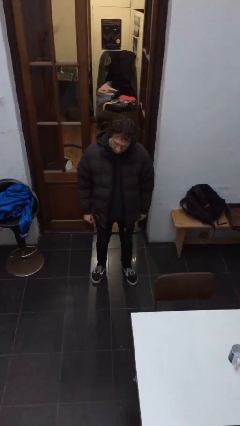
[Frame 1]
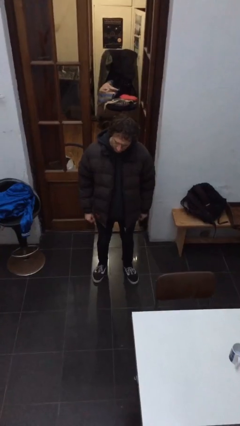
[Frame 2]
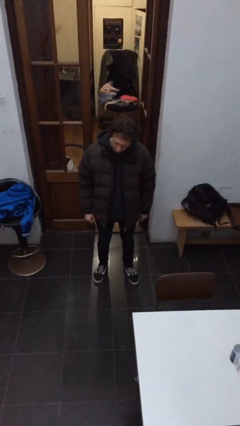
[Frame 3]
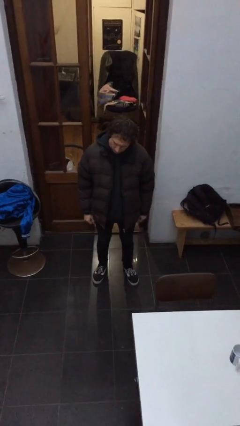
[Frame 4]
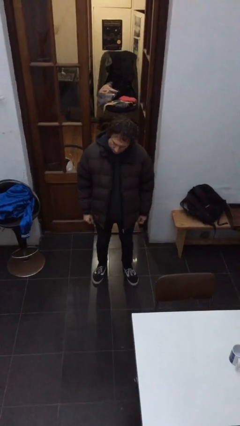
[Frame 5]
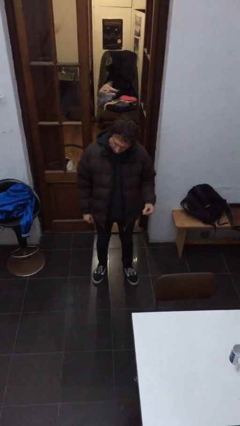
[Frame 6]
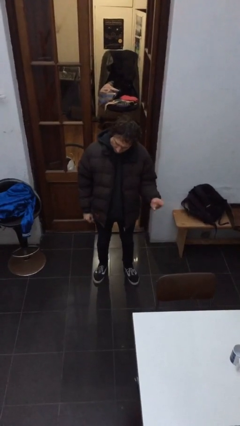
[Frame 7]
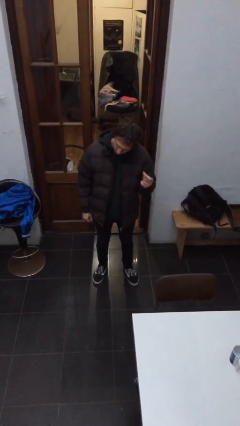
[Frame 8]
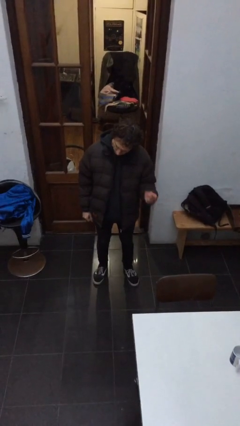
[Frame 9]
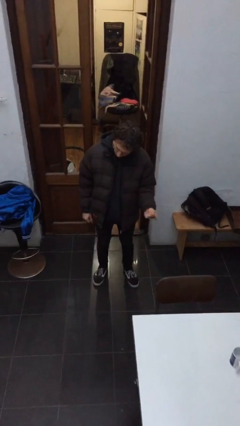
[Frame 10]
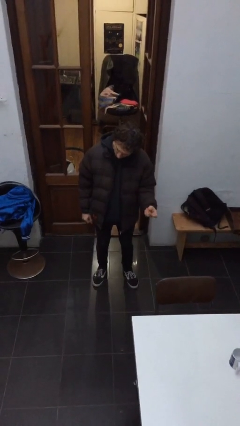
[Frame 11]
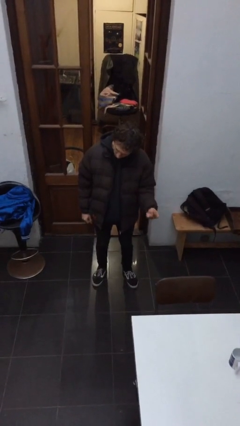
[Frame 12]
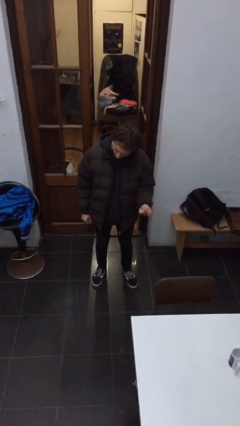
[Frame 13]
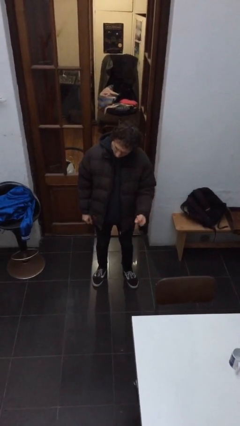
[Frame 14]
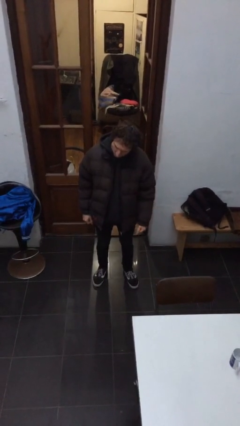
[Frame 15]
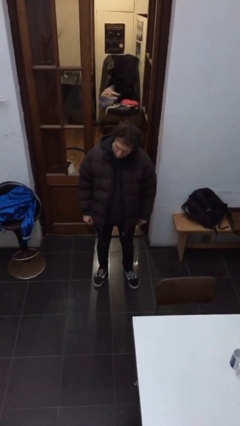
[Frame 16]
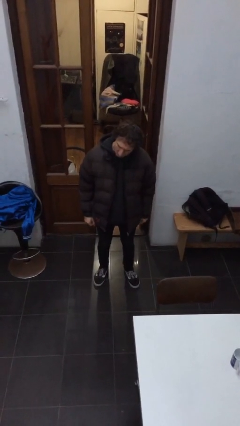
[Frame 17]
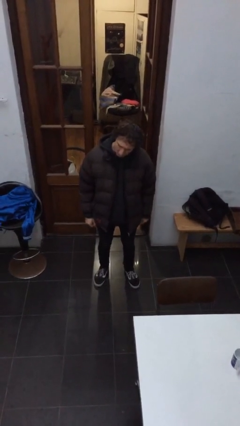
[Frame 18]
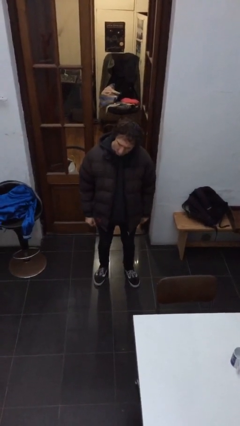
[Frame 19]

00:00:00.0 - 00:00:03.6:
person snaps fingers

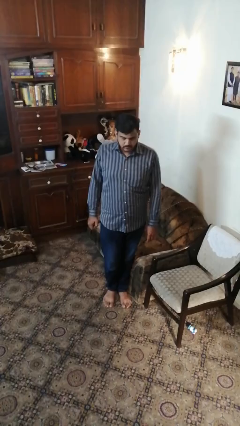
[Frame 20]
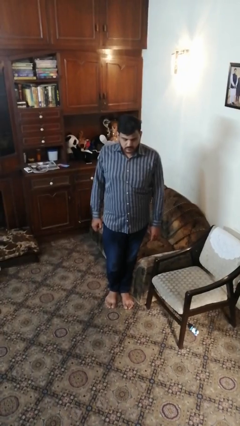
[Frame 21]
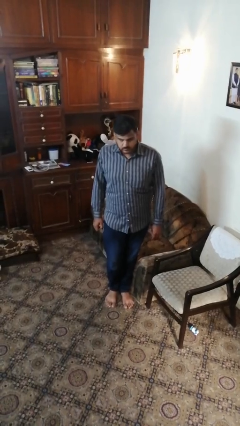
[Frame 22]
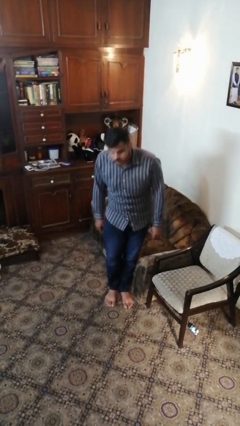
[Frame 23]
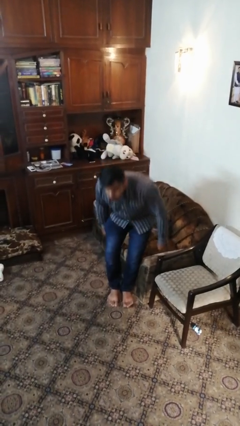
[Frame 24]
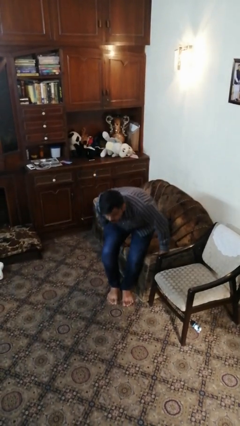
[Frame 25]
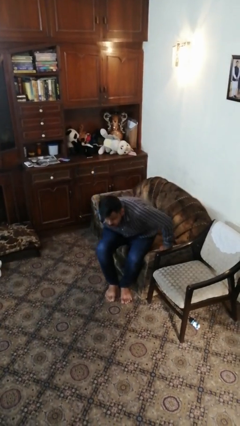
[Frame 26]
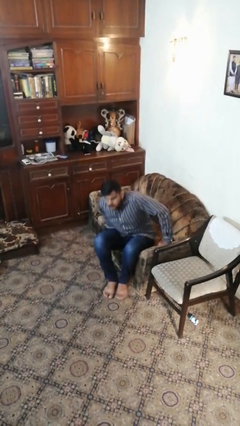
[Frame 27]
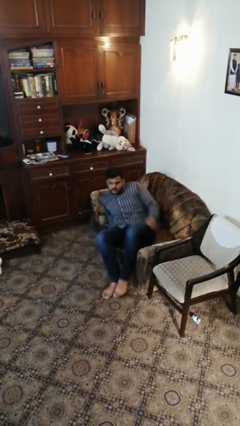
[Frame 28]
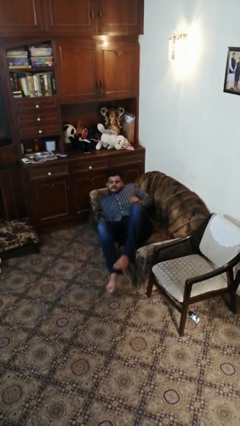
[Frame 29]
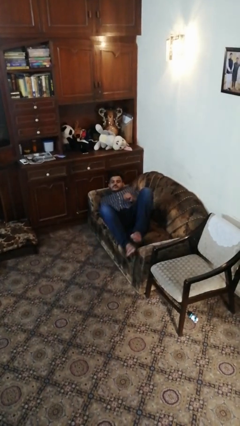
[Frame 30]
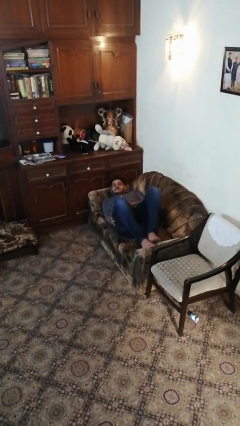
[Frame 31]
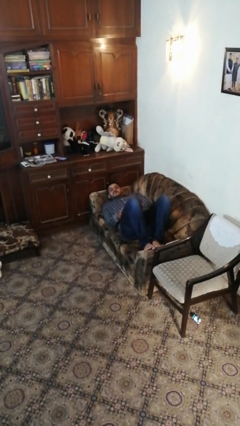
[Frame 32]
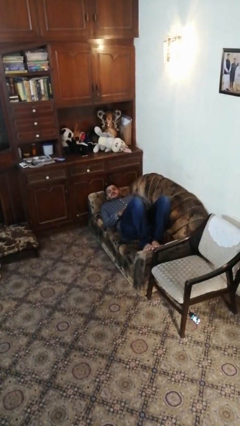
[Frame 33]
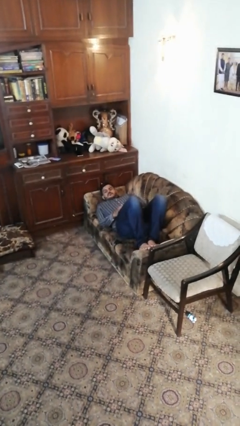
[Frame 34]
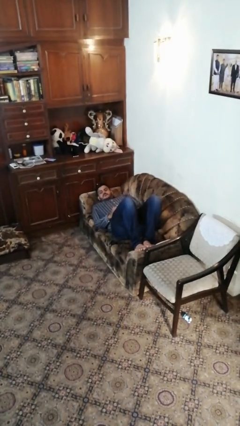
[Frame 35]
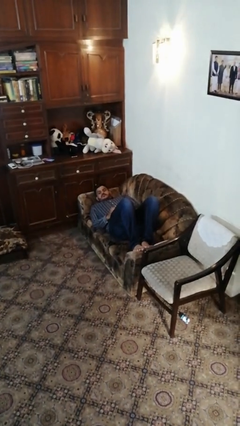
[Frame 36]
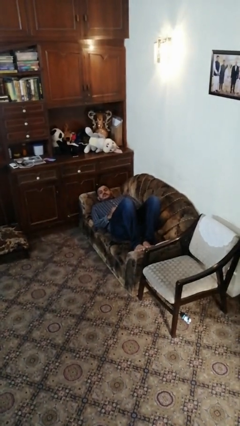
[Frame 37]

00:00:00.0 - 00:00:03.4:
person lies down on couch

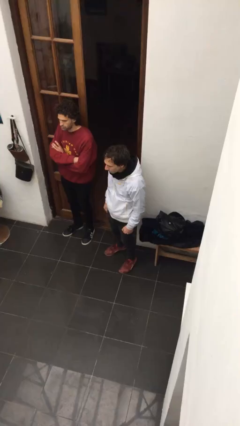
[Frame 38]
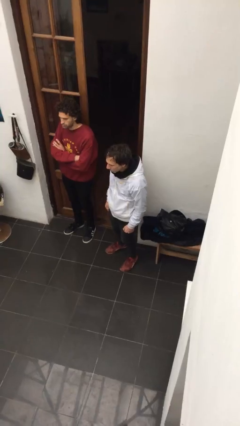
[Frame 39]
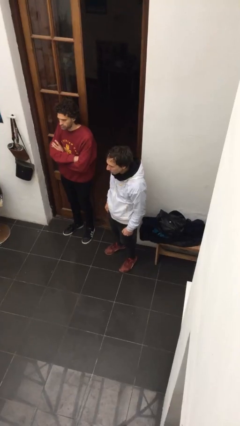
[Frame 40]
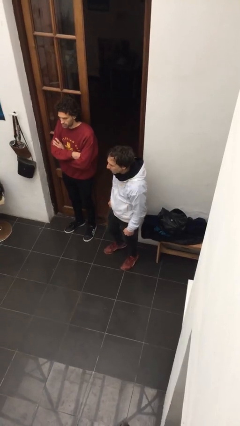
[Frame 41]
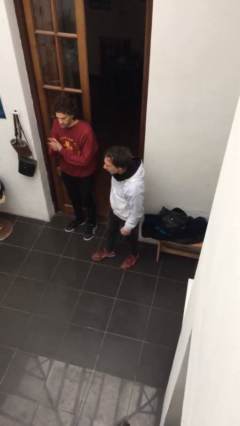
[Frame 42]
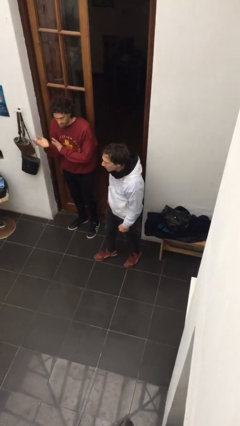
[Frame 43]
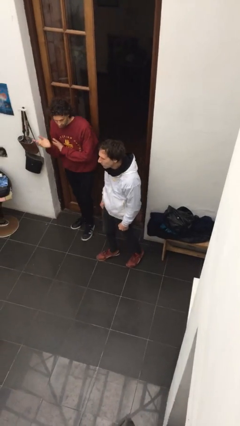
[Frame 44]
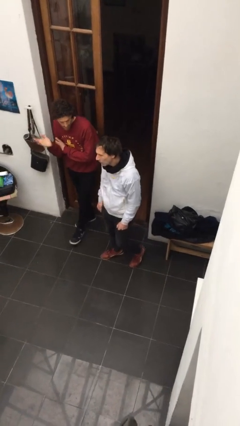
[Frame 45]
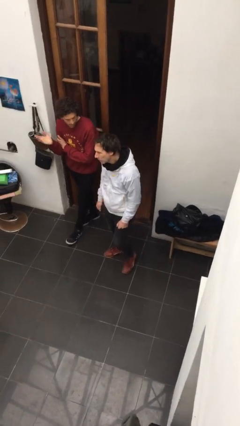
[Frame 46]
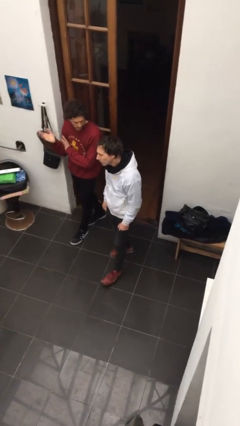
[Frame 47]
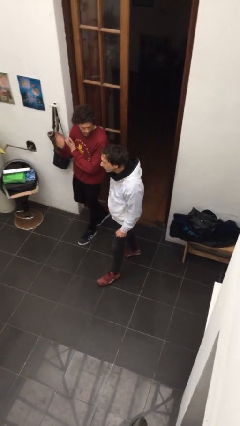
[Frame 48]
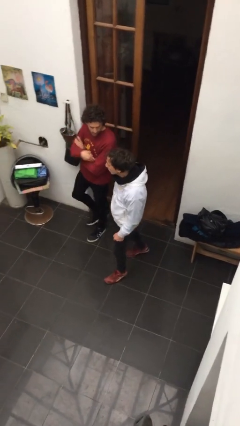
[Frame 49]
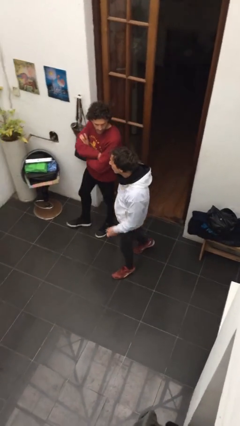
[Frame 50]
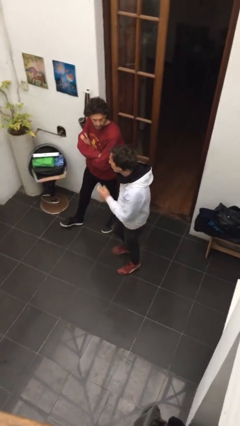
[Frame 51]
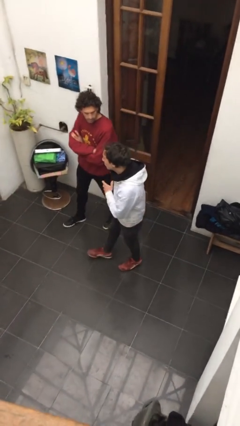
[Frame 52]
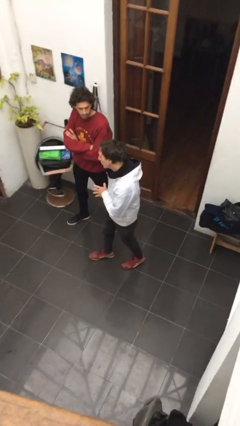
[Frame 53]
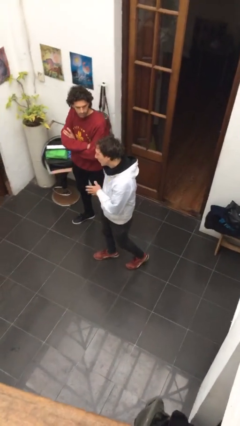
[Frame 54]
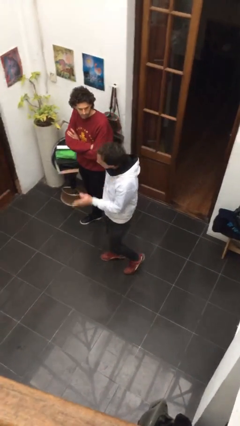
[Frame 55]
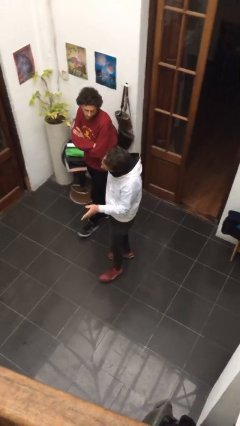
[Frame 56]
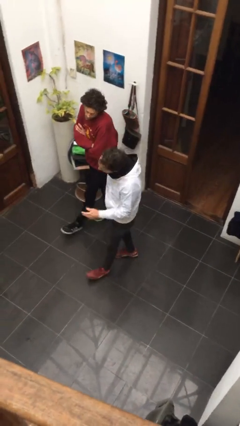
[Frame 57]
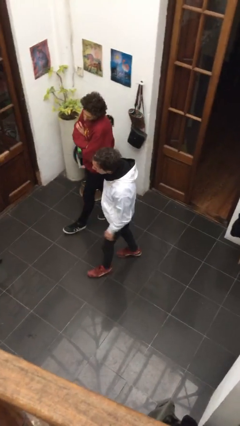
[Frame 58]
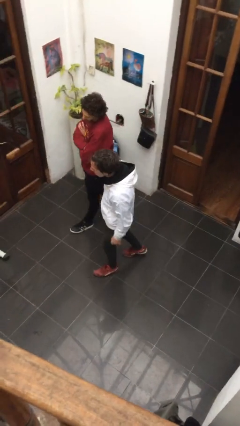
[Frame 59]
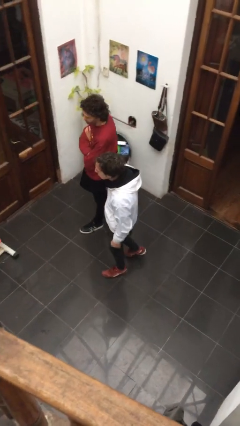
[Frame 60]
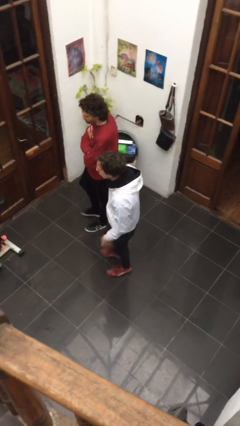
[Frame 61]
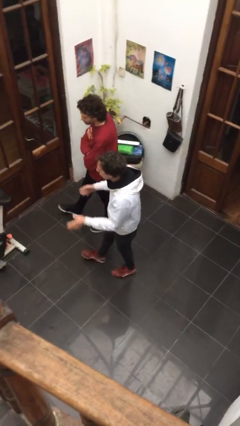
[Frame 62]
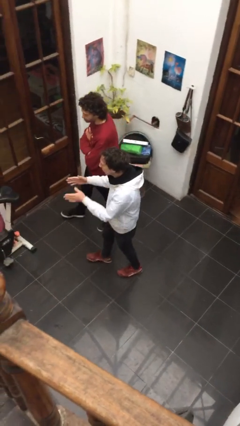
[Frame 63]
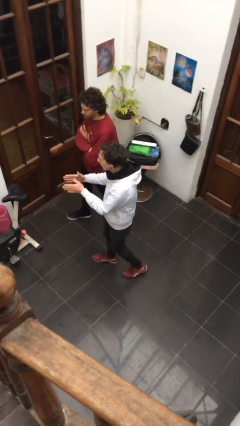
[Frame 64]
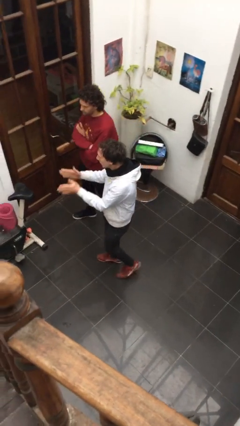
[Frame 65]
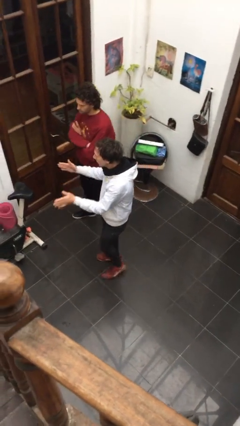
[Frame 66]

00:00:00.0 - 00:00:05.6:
person talks to person

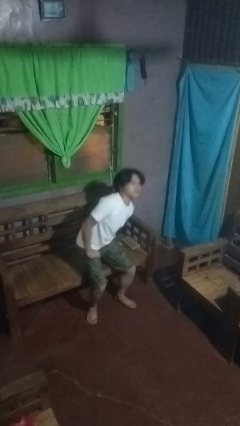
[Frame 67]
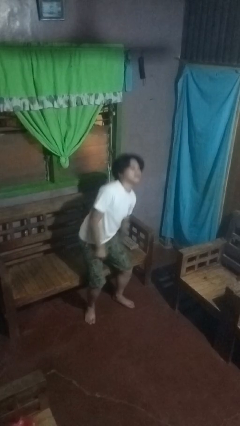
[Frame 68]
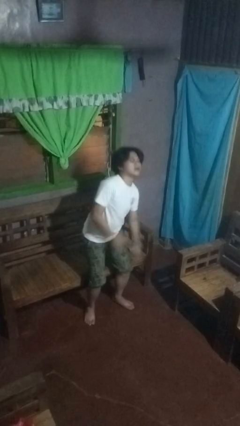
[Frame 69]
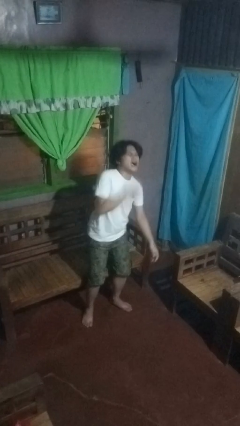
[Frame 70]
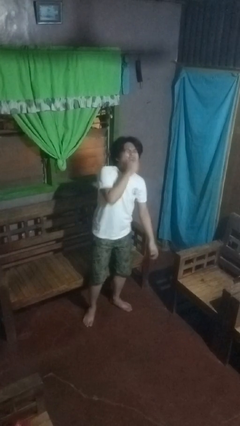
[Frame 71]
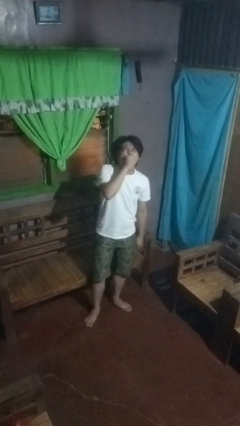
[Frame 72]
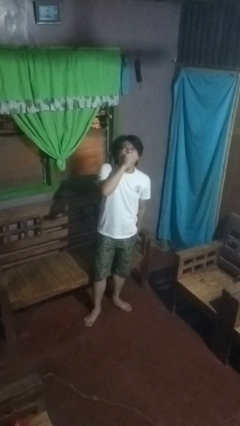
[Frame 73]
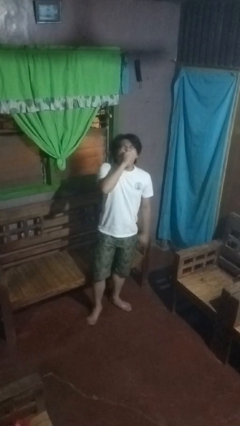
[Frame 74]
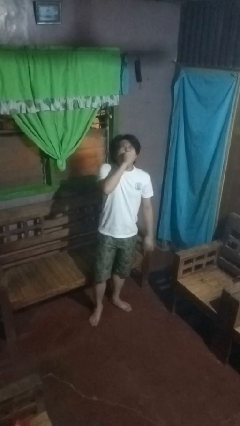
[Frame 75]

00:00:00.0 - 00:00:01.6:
person yawns

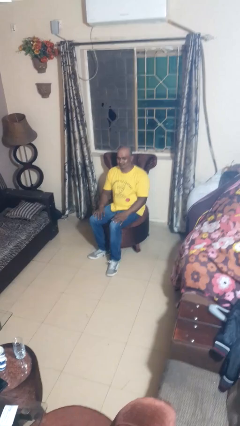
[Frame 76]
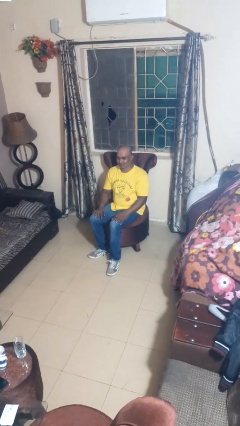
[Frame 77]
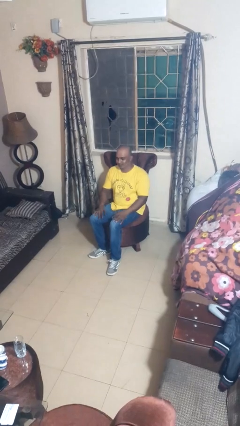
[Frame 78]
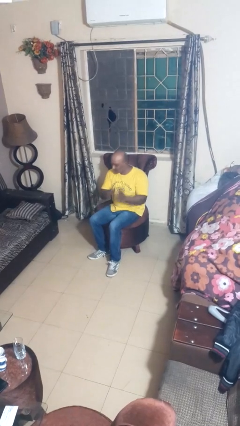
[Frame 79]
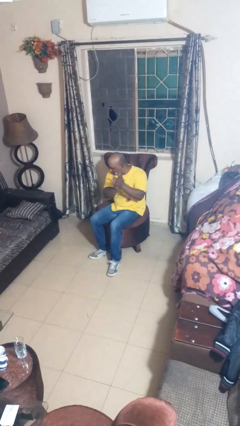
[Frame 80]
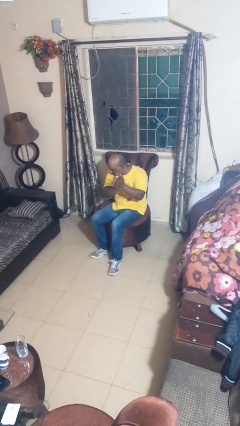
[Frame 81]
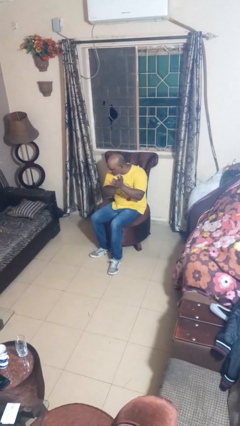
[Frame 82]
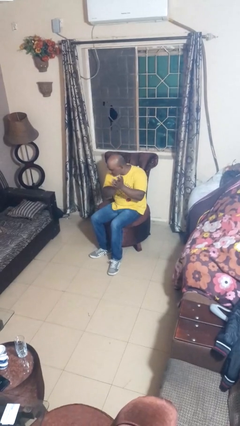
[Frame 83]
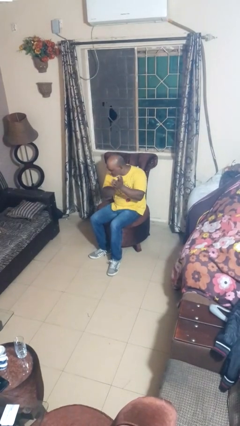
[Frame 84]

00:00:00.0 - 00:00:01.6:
person claps hands

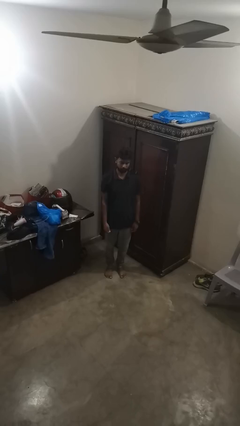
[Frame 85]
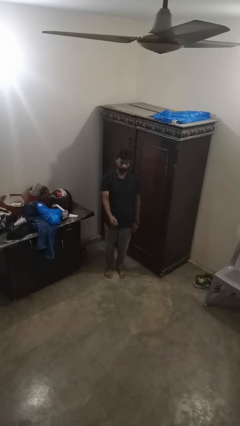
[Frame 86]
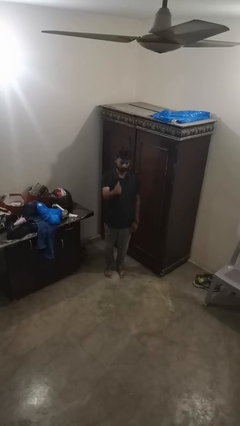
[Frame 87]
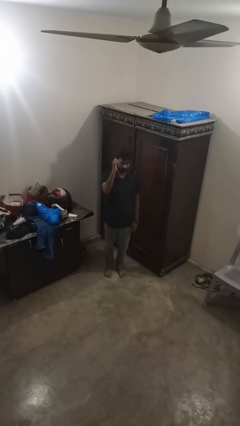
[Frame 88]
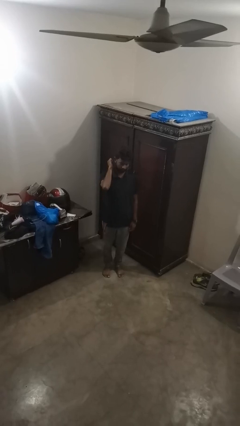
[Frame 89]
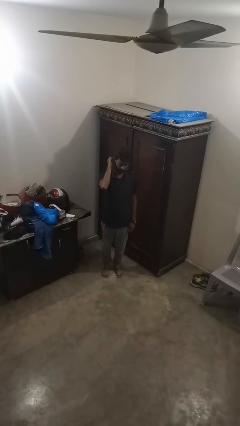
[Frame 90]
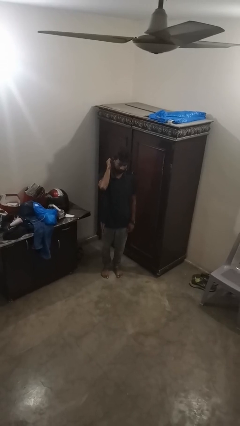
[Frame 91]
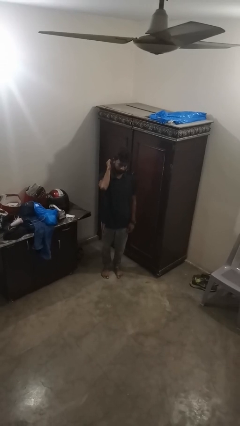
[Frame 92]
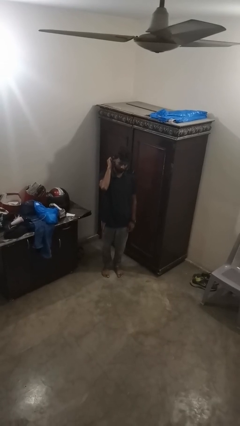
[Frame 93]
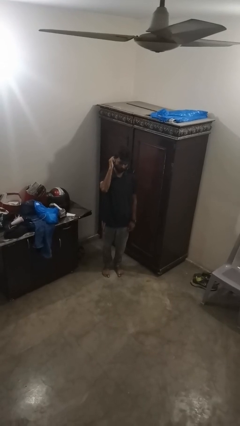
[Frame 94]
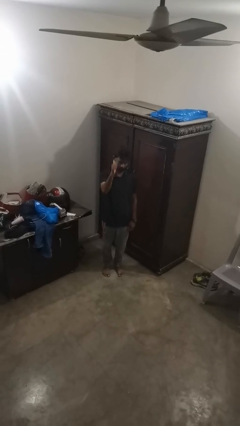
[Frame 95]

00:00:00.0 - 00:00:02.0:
person gestures behind me
